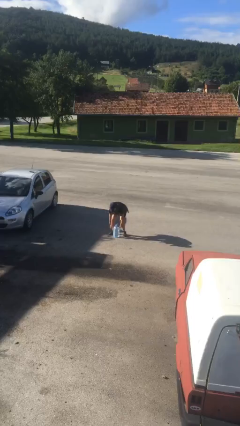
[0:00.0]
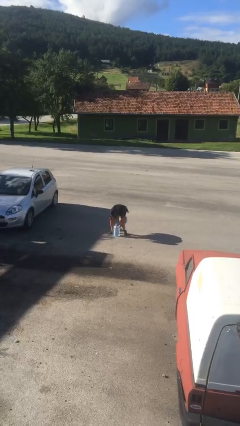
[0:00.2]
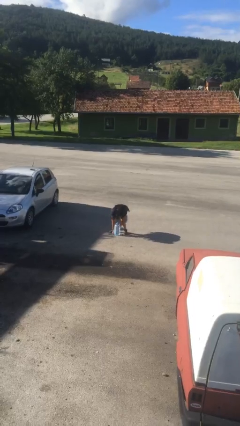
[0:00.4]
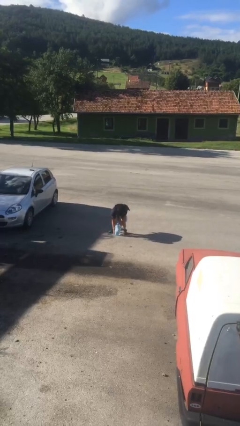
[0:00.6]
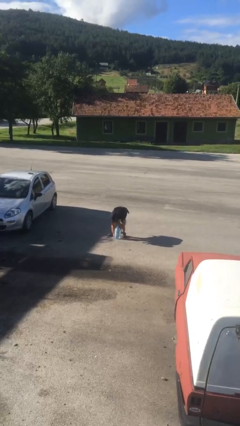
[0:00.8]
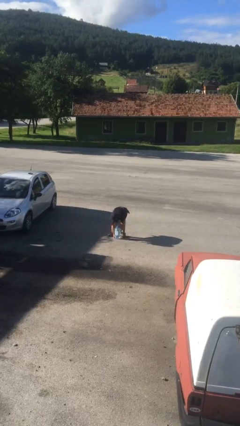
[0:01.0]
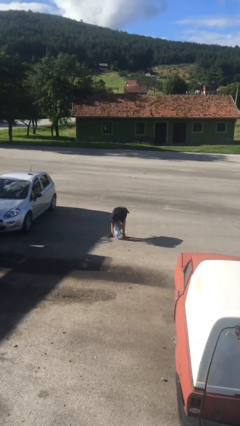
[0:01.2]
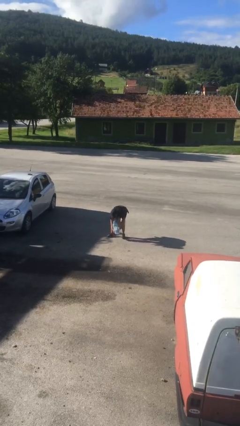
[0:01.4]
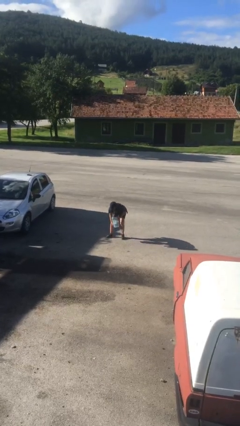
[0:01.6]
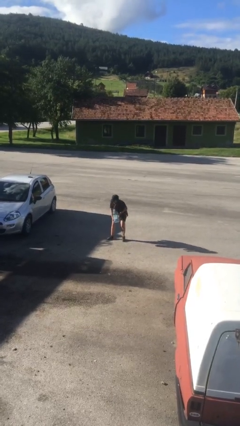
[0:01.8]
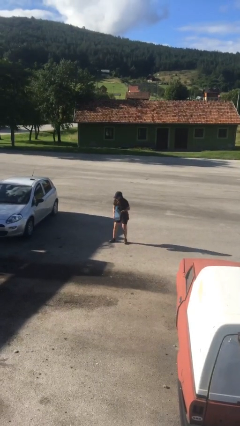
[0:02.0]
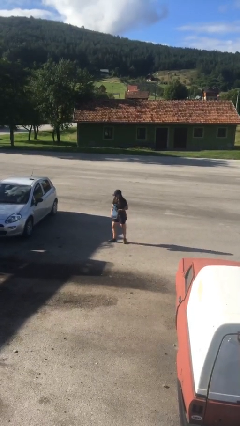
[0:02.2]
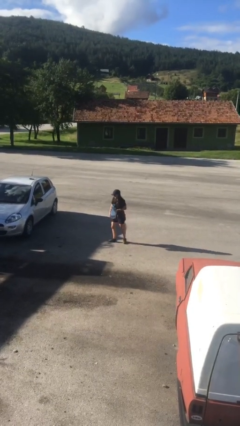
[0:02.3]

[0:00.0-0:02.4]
person picks up object from floor

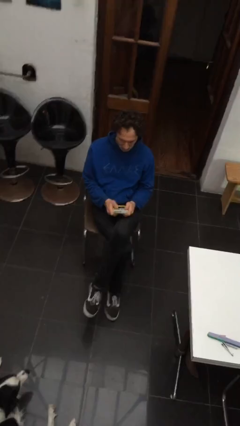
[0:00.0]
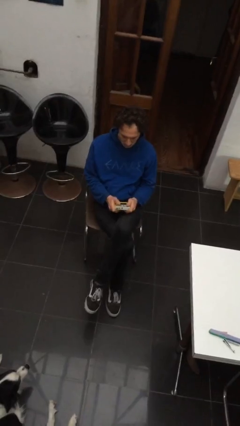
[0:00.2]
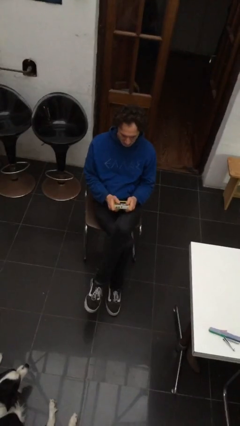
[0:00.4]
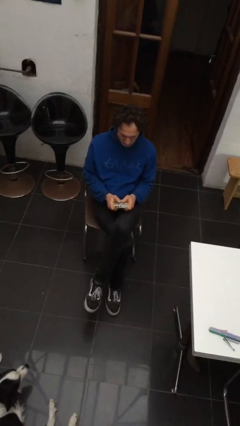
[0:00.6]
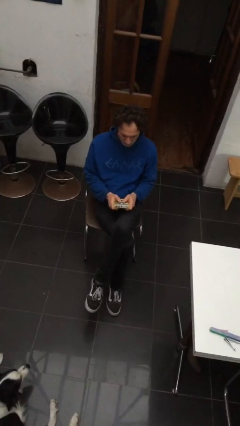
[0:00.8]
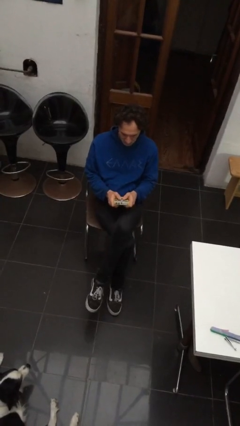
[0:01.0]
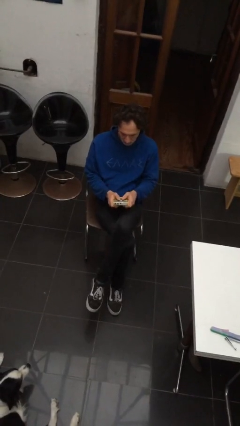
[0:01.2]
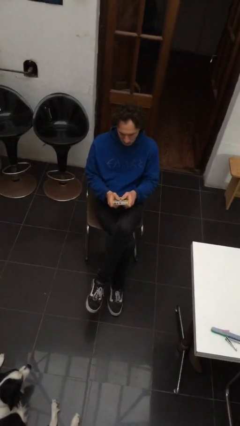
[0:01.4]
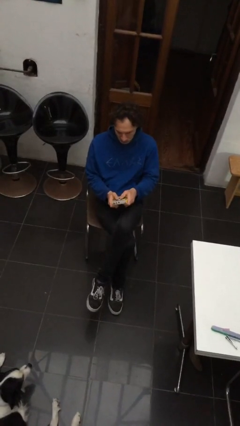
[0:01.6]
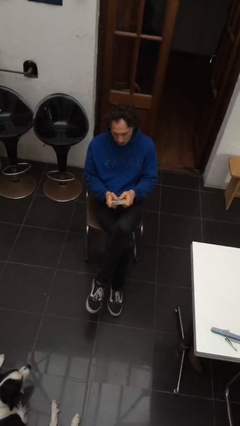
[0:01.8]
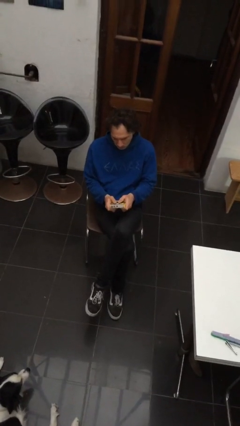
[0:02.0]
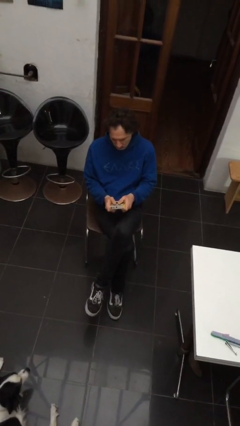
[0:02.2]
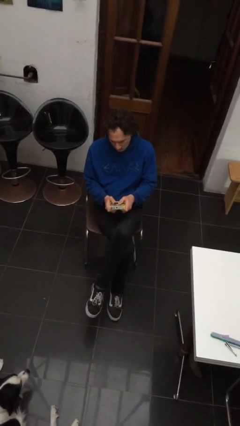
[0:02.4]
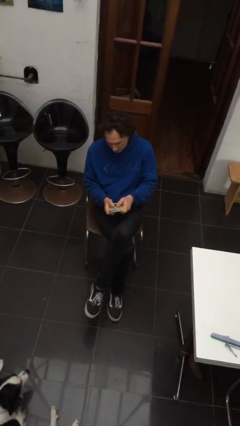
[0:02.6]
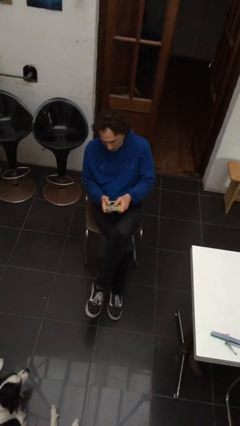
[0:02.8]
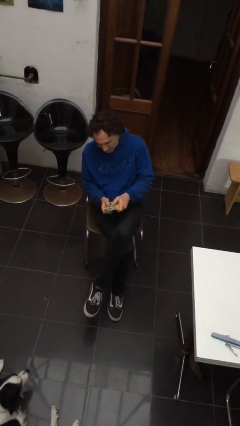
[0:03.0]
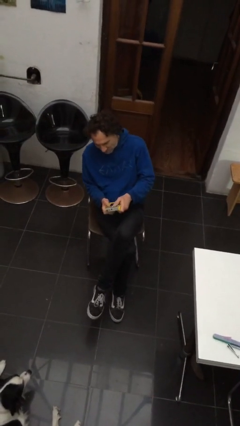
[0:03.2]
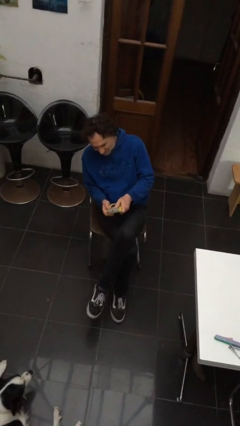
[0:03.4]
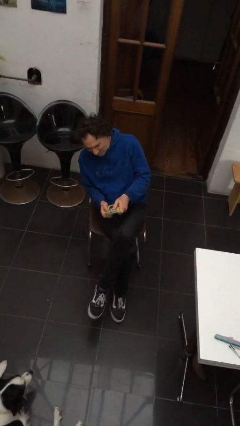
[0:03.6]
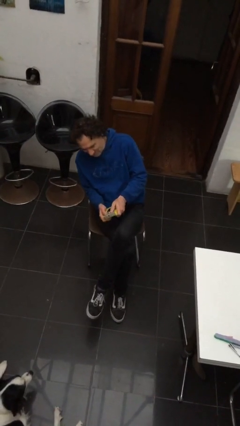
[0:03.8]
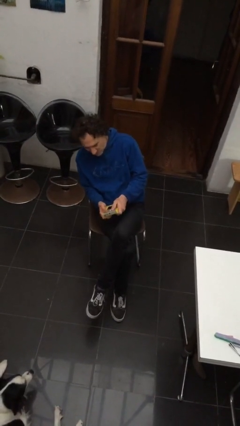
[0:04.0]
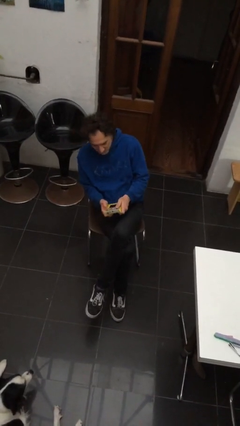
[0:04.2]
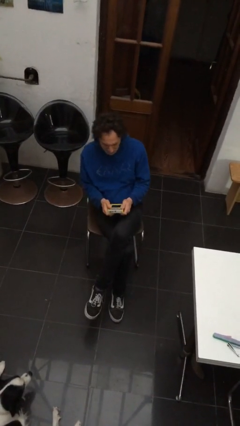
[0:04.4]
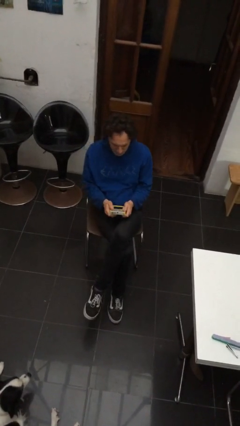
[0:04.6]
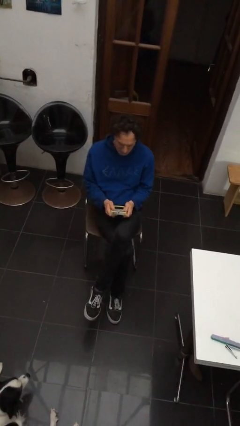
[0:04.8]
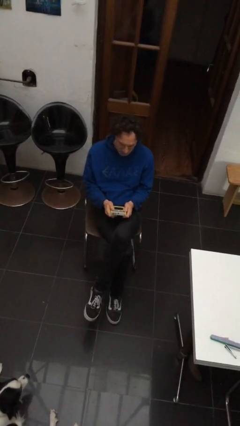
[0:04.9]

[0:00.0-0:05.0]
person interacts with handheld game

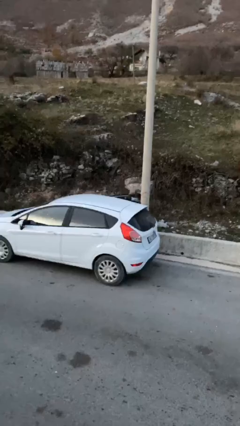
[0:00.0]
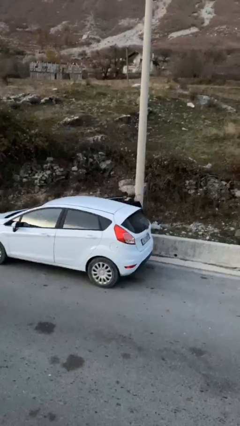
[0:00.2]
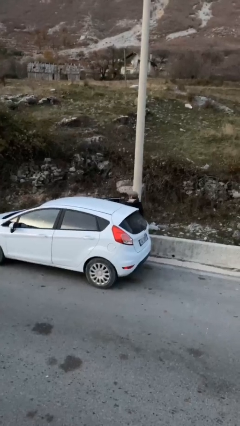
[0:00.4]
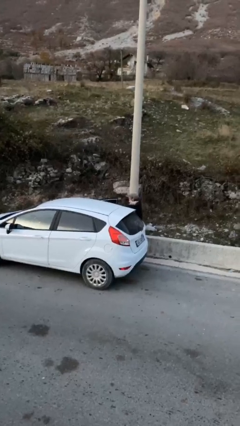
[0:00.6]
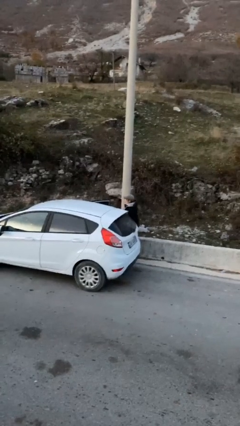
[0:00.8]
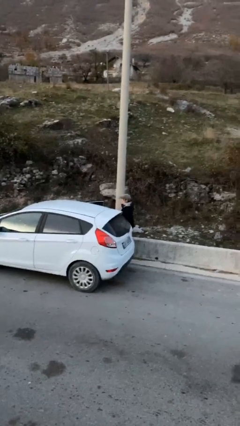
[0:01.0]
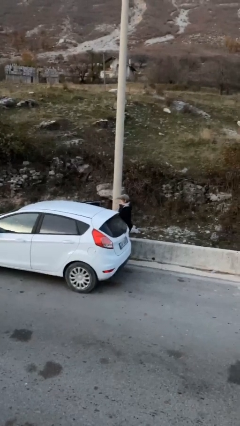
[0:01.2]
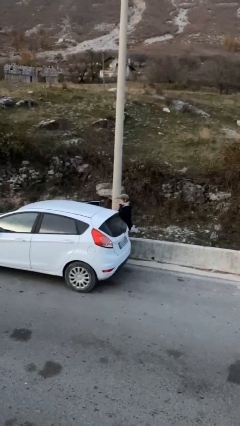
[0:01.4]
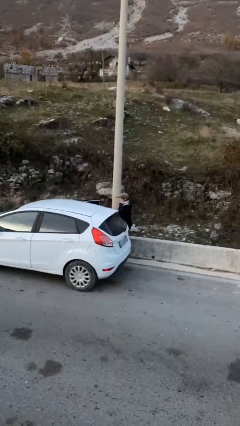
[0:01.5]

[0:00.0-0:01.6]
person exits car

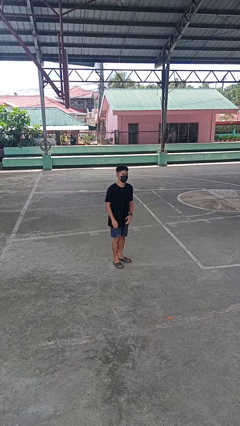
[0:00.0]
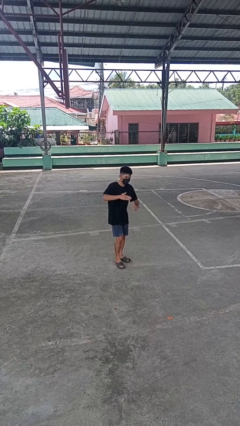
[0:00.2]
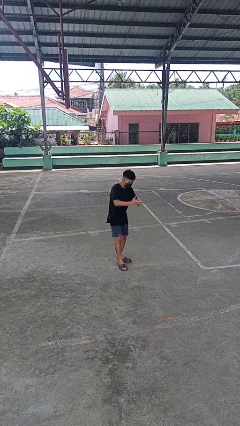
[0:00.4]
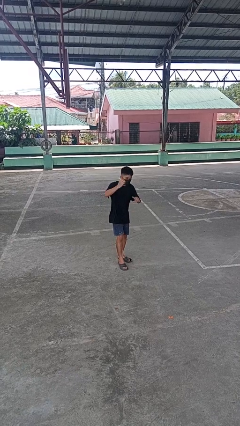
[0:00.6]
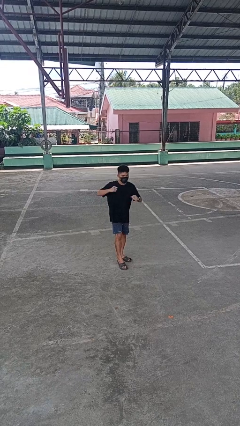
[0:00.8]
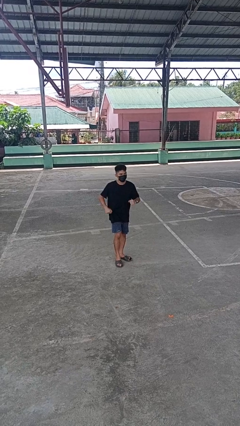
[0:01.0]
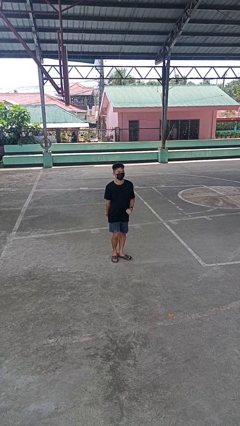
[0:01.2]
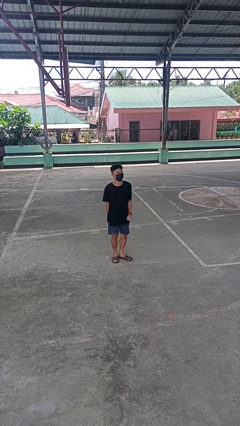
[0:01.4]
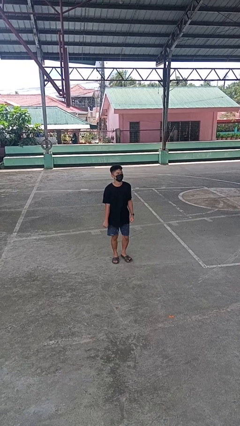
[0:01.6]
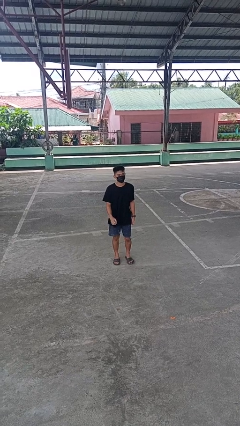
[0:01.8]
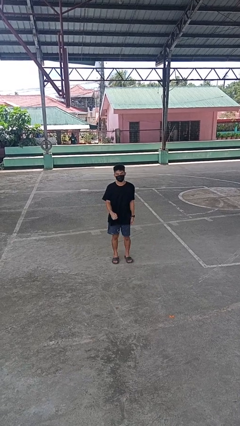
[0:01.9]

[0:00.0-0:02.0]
person karate chop

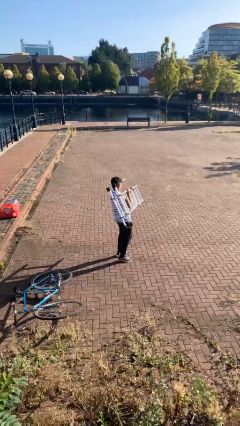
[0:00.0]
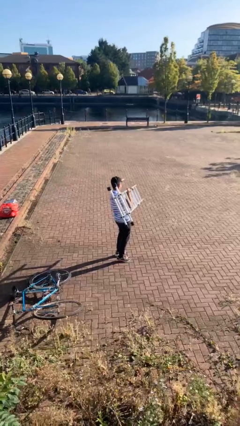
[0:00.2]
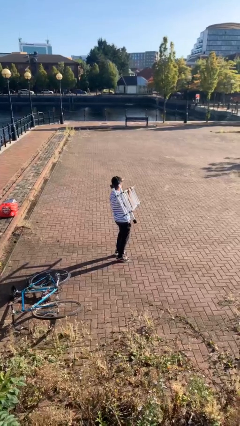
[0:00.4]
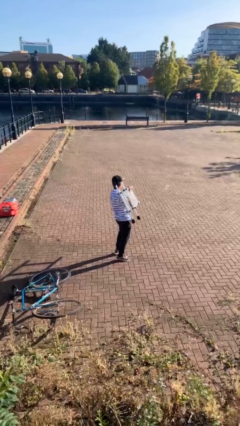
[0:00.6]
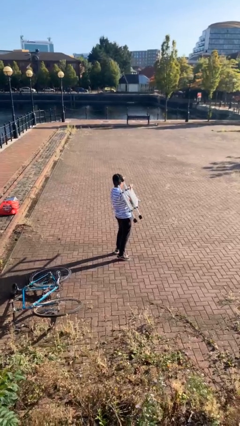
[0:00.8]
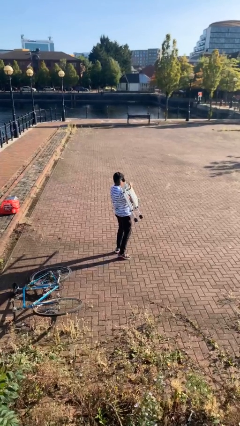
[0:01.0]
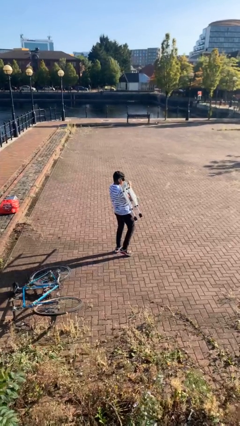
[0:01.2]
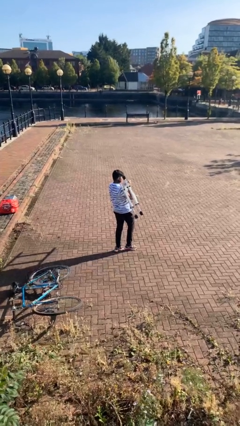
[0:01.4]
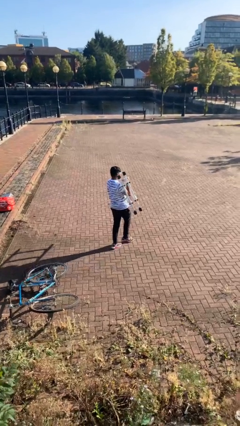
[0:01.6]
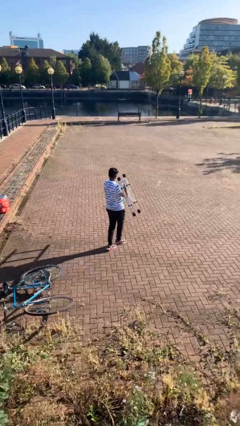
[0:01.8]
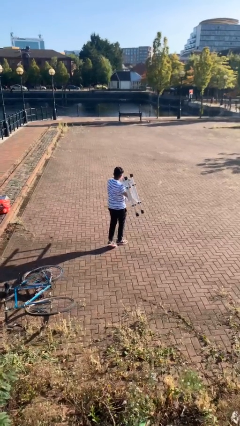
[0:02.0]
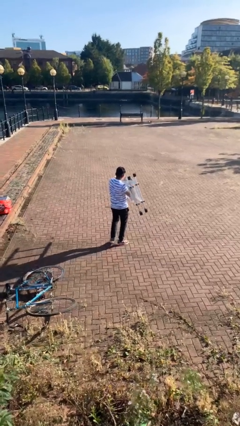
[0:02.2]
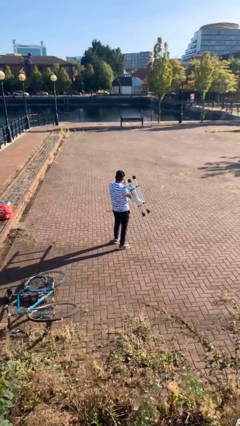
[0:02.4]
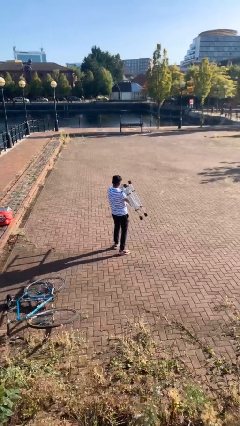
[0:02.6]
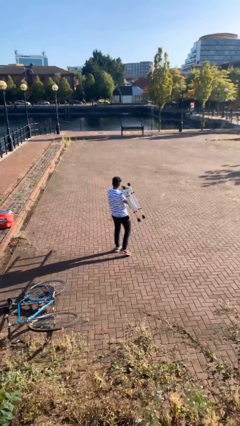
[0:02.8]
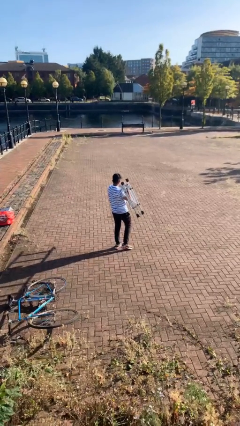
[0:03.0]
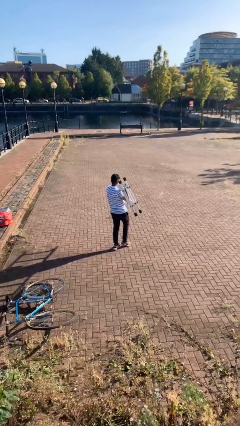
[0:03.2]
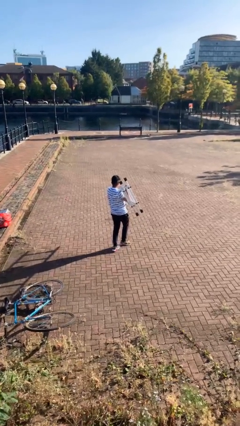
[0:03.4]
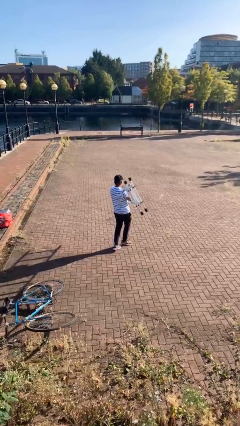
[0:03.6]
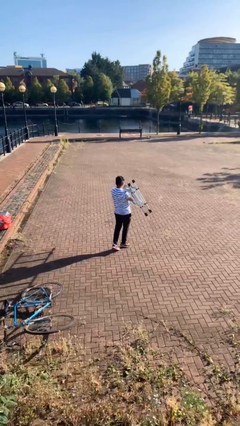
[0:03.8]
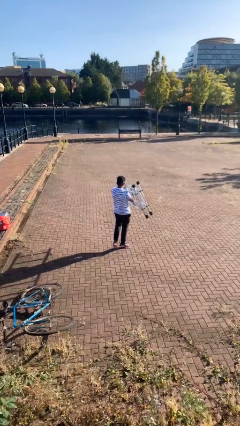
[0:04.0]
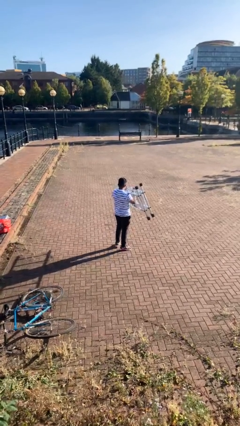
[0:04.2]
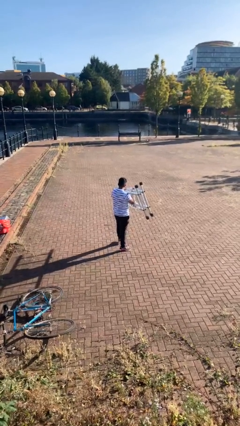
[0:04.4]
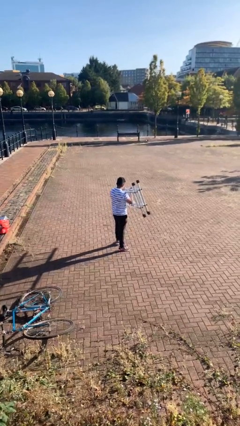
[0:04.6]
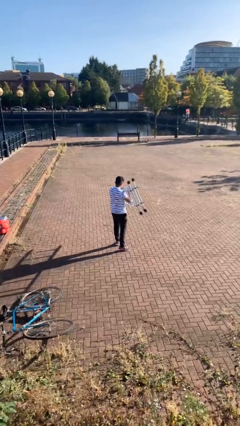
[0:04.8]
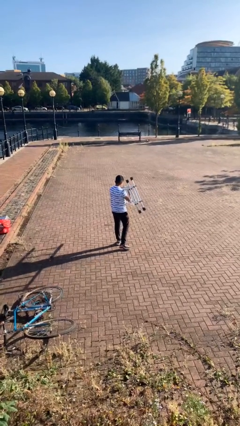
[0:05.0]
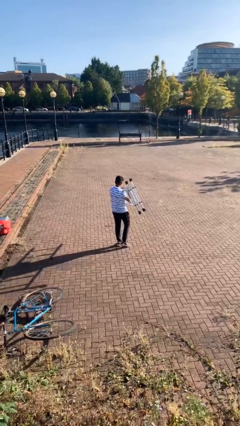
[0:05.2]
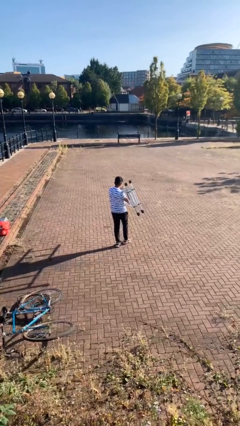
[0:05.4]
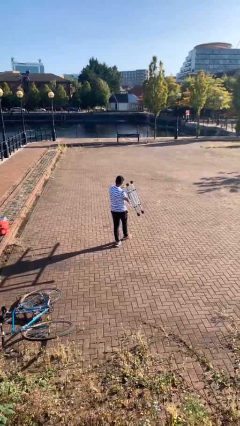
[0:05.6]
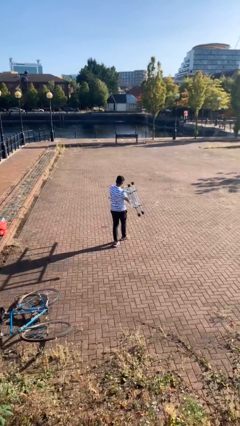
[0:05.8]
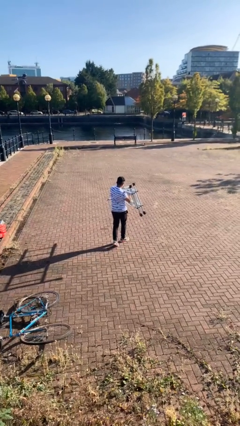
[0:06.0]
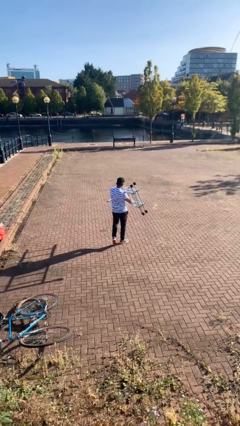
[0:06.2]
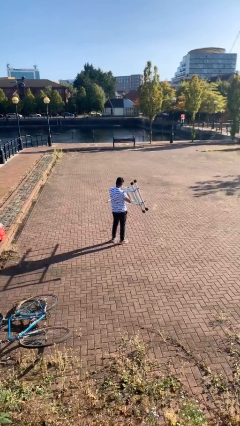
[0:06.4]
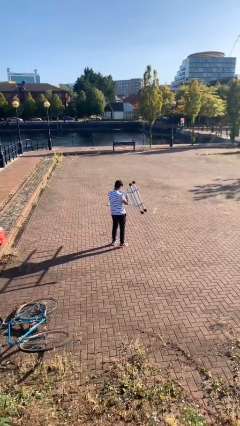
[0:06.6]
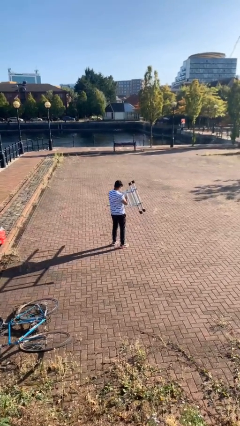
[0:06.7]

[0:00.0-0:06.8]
person carries heavy object
